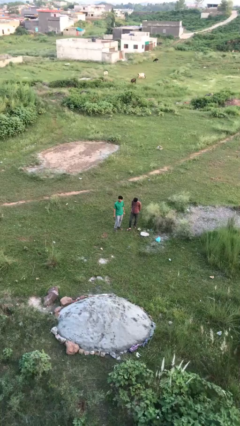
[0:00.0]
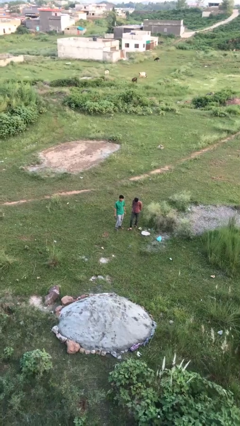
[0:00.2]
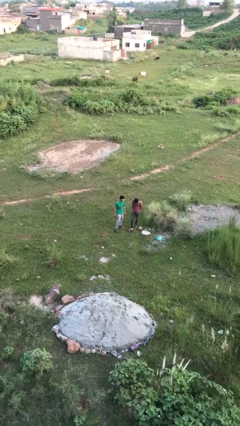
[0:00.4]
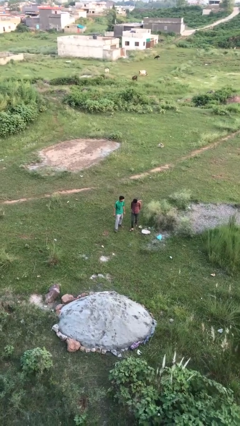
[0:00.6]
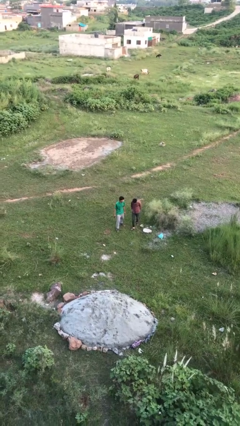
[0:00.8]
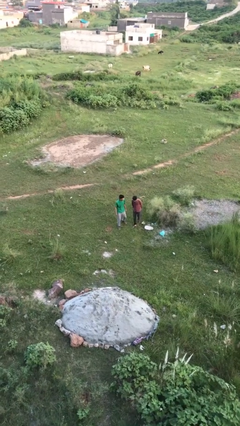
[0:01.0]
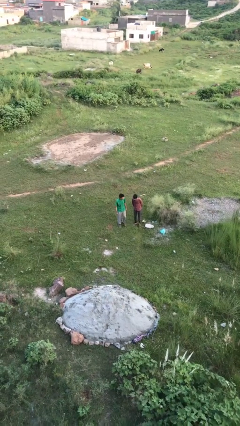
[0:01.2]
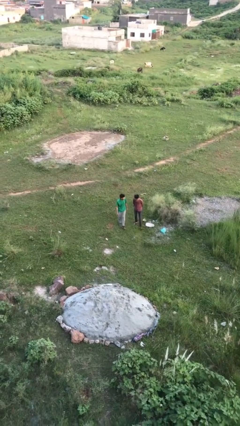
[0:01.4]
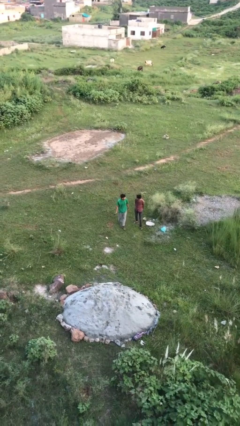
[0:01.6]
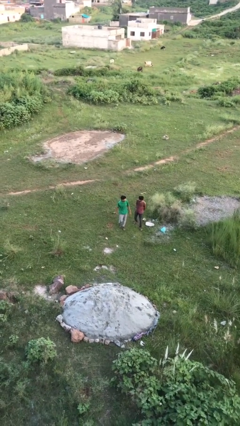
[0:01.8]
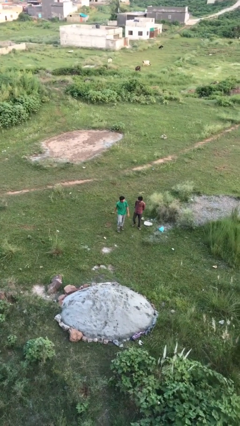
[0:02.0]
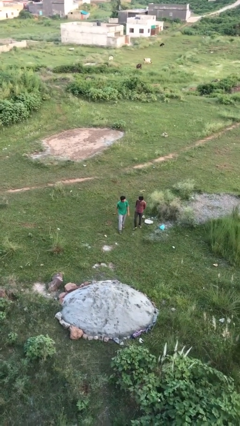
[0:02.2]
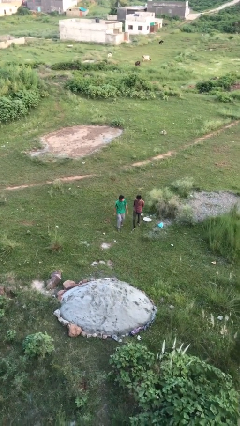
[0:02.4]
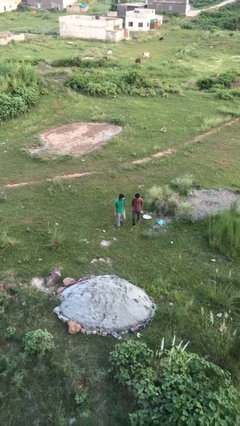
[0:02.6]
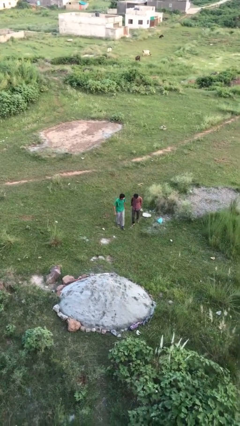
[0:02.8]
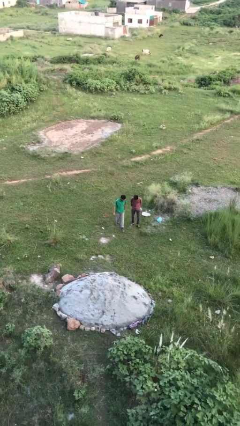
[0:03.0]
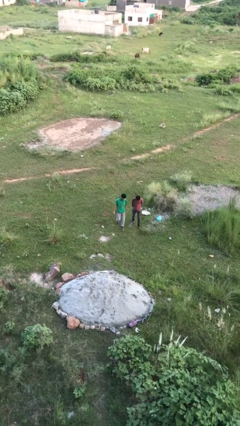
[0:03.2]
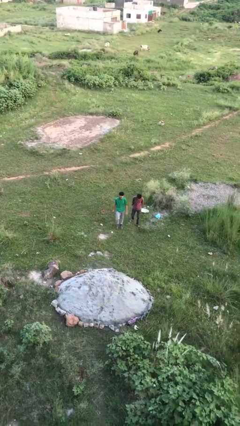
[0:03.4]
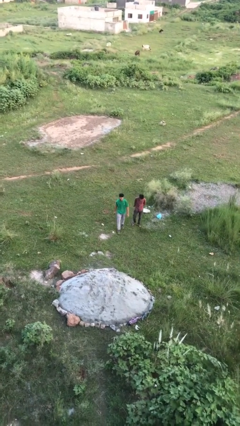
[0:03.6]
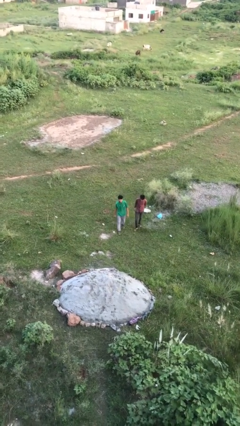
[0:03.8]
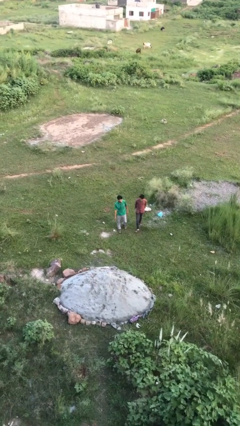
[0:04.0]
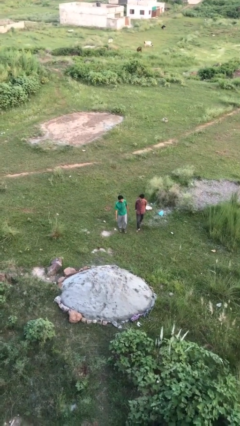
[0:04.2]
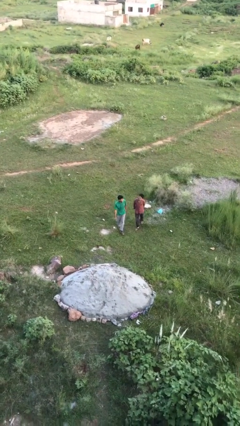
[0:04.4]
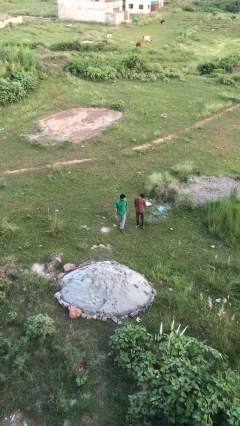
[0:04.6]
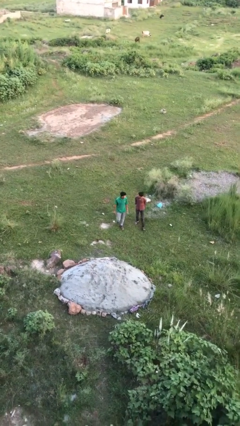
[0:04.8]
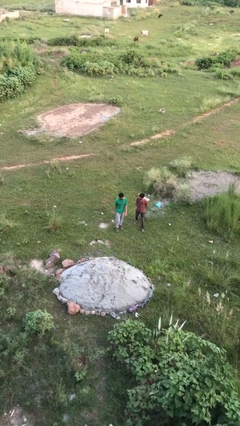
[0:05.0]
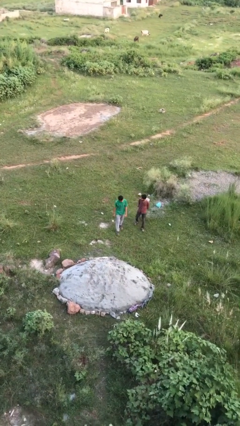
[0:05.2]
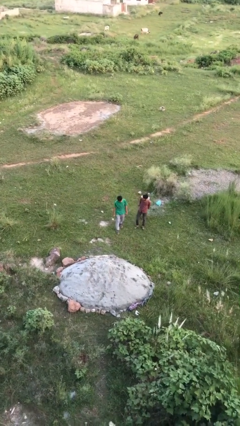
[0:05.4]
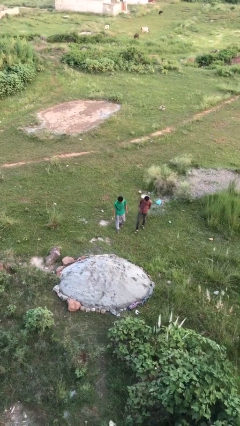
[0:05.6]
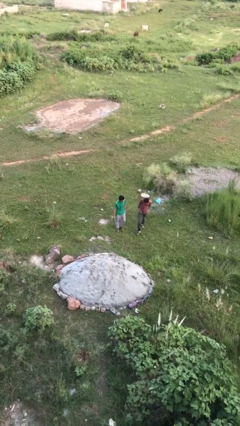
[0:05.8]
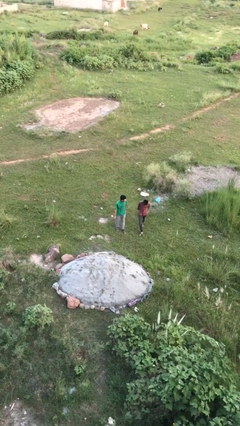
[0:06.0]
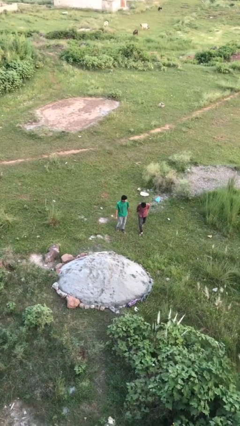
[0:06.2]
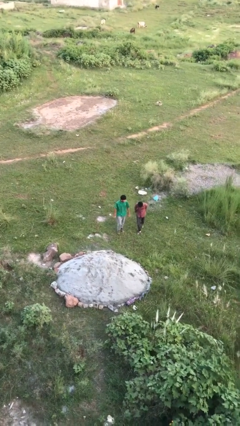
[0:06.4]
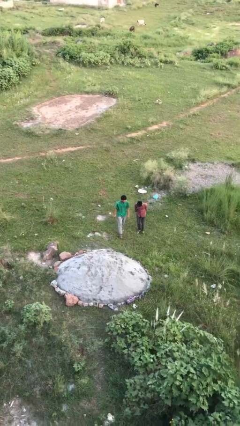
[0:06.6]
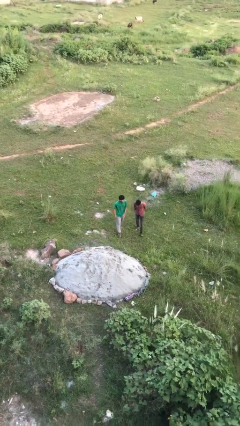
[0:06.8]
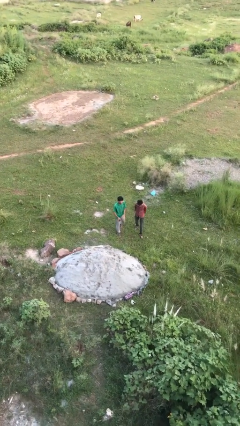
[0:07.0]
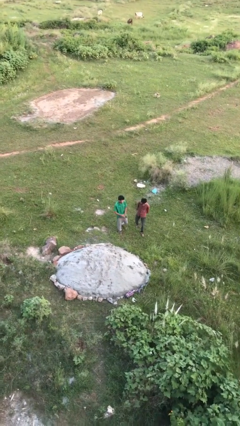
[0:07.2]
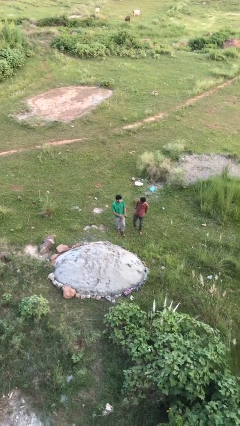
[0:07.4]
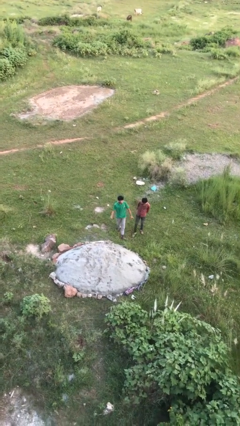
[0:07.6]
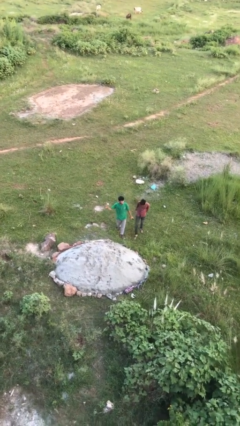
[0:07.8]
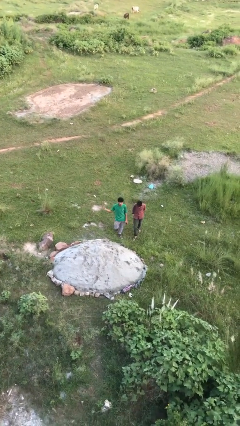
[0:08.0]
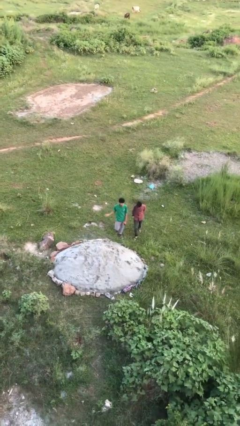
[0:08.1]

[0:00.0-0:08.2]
person talks to person

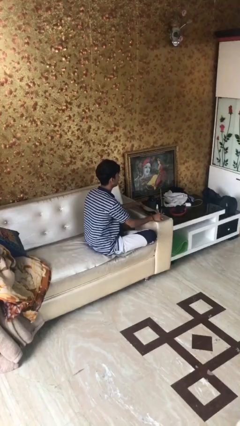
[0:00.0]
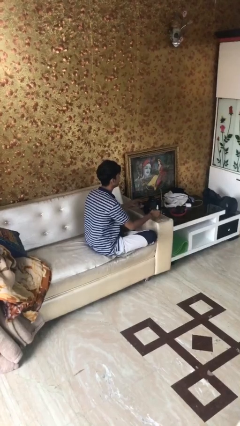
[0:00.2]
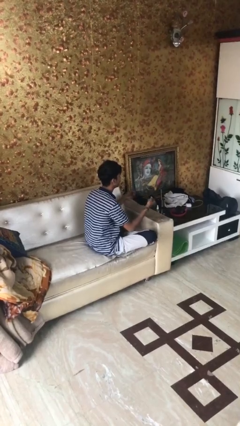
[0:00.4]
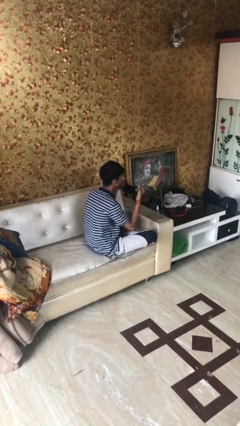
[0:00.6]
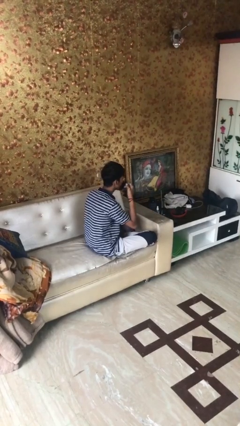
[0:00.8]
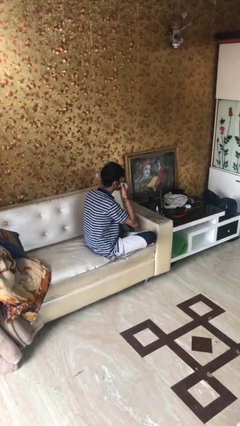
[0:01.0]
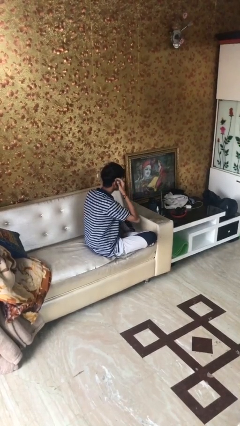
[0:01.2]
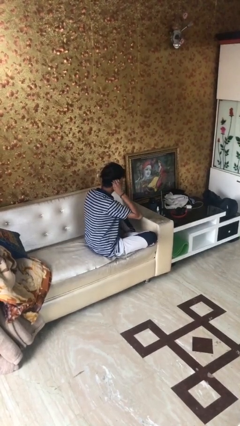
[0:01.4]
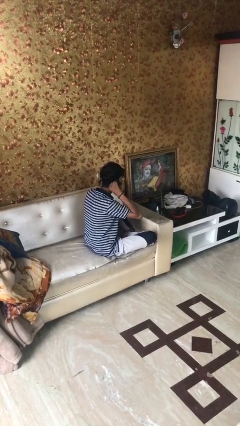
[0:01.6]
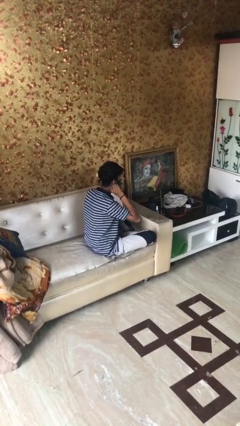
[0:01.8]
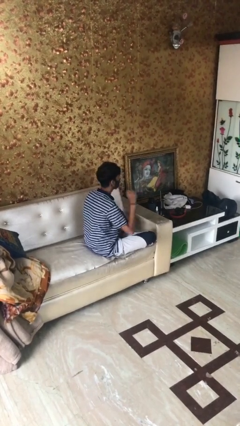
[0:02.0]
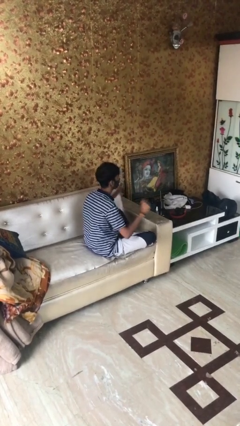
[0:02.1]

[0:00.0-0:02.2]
person puts on facemask

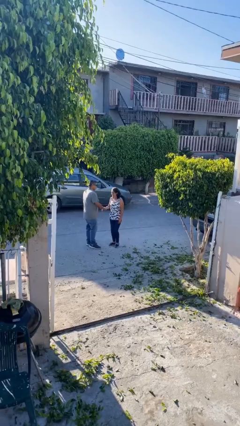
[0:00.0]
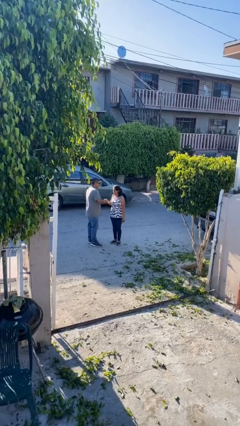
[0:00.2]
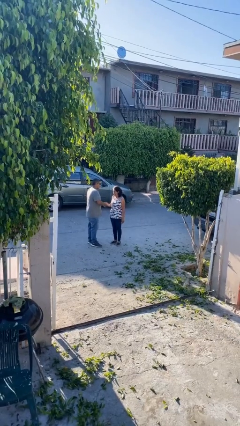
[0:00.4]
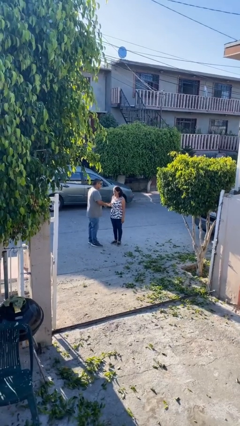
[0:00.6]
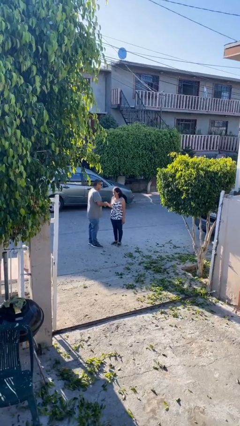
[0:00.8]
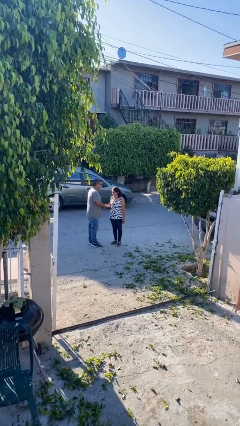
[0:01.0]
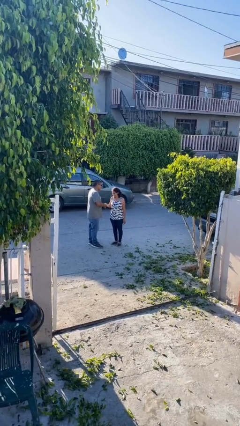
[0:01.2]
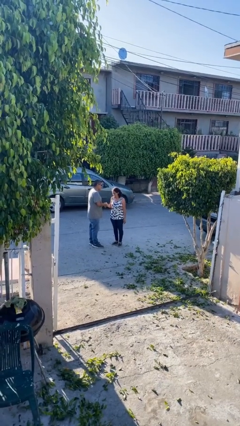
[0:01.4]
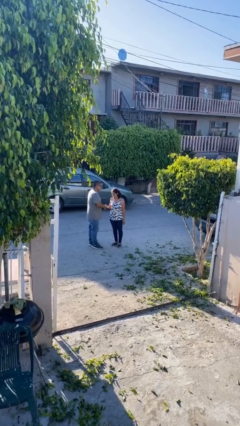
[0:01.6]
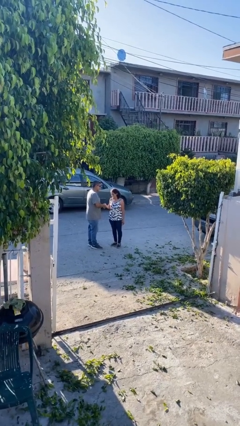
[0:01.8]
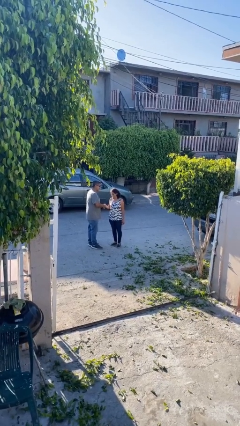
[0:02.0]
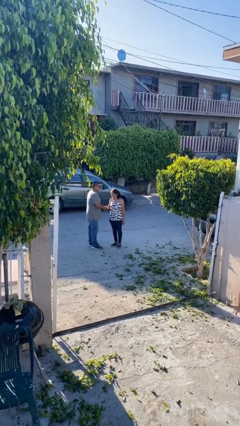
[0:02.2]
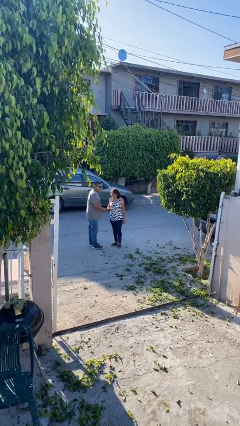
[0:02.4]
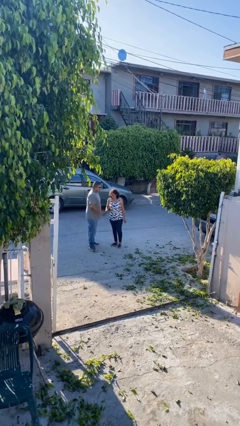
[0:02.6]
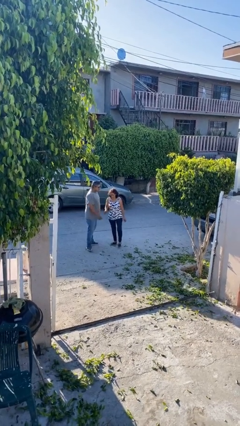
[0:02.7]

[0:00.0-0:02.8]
person shakes hand

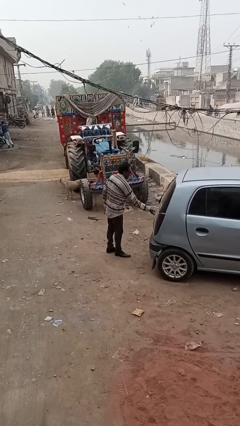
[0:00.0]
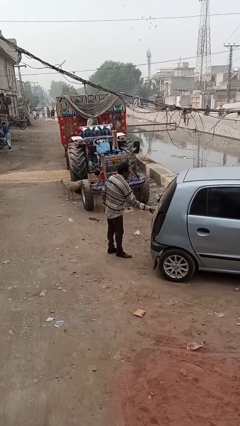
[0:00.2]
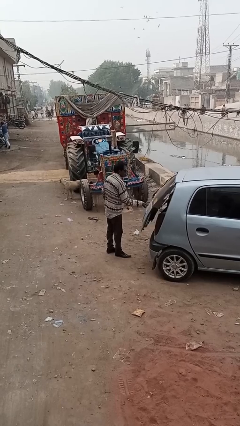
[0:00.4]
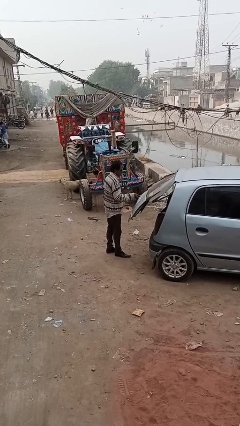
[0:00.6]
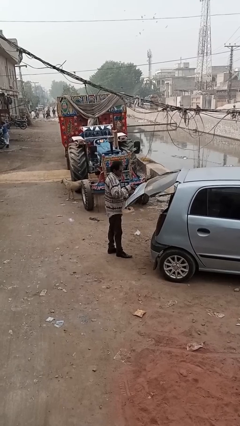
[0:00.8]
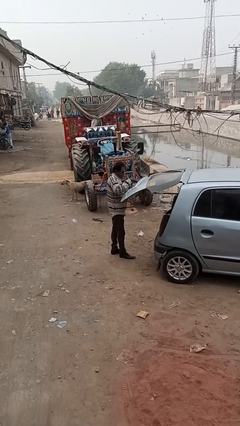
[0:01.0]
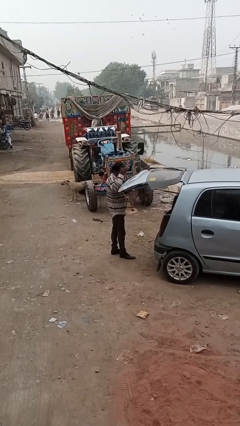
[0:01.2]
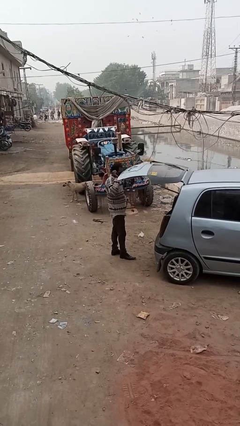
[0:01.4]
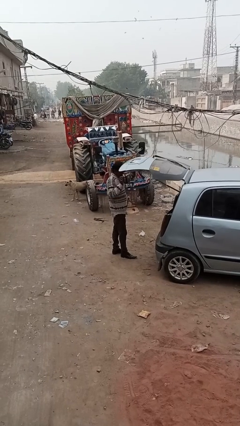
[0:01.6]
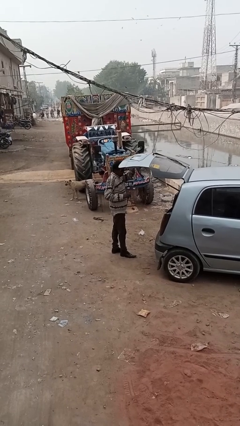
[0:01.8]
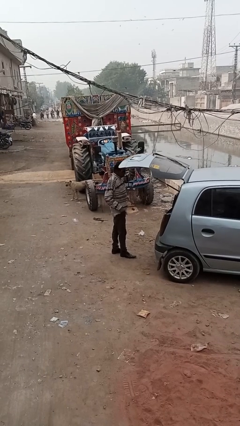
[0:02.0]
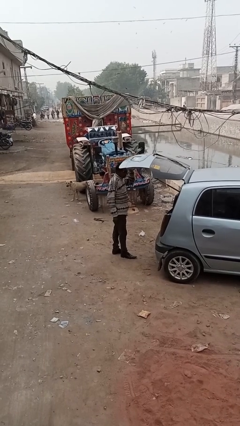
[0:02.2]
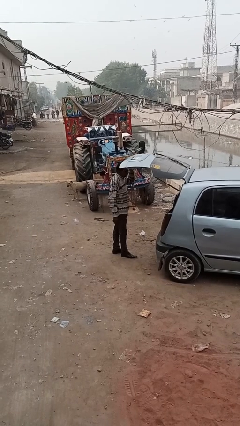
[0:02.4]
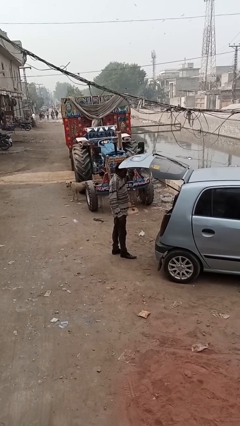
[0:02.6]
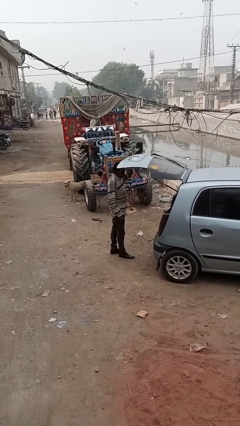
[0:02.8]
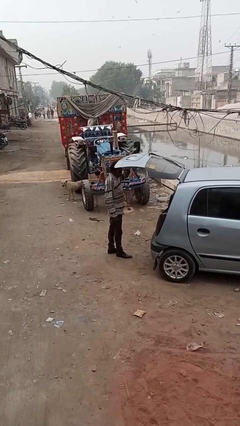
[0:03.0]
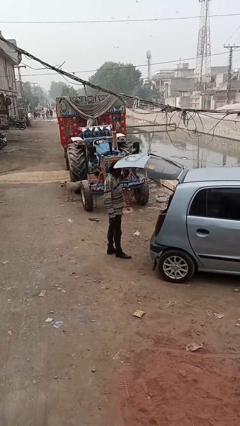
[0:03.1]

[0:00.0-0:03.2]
person opens car trunk

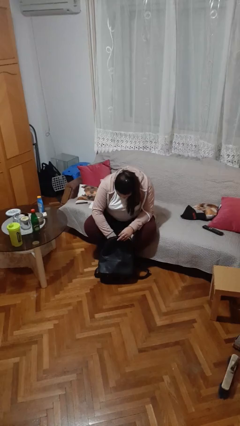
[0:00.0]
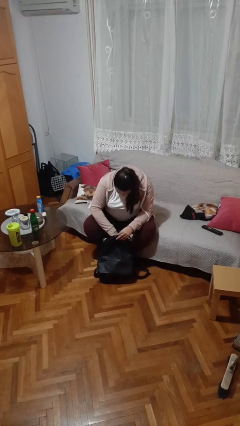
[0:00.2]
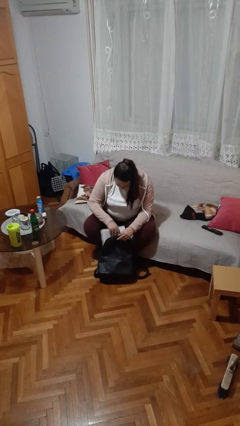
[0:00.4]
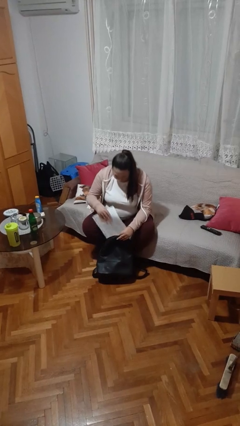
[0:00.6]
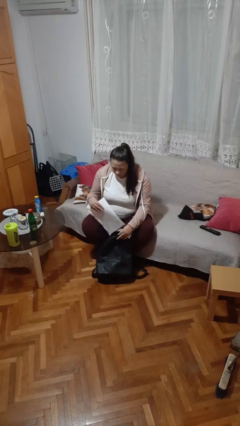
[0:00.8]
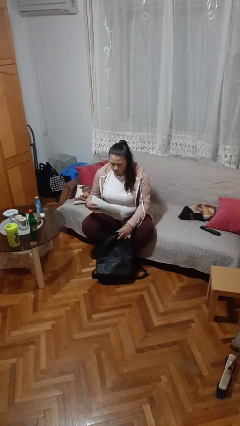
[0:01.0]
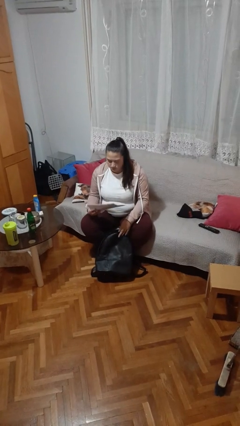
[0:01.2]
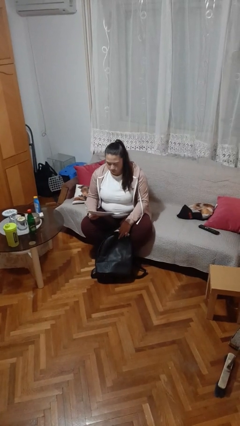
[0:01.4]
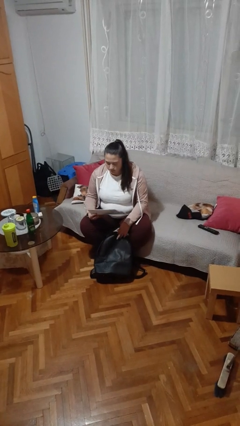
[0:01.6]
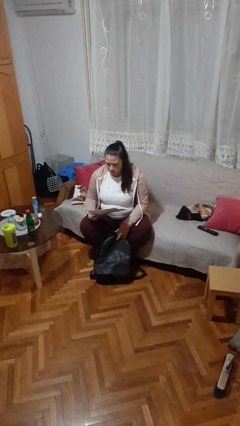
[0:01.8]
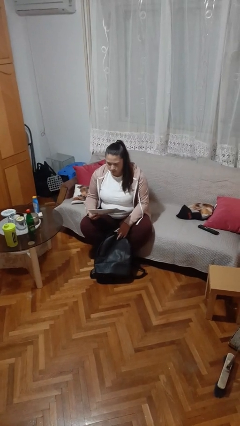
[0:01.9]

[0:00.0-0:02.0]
person takes object from backpack
